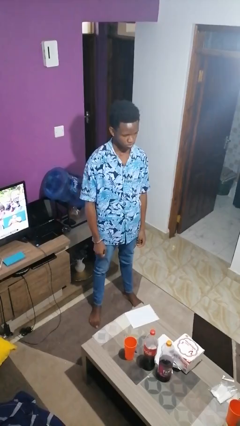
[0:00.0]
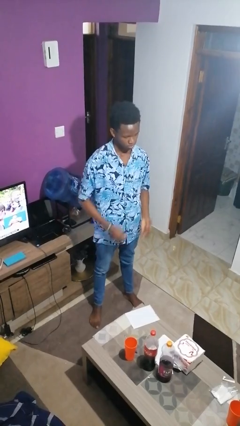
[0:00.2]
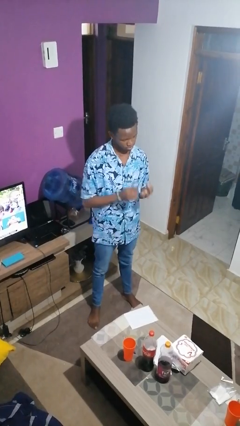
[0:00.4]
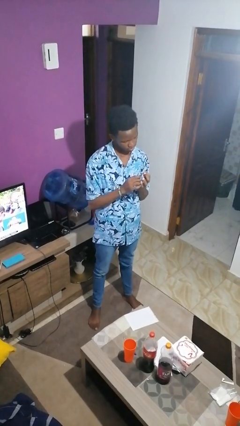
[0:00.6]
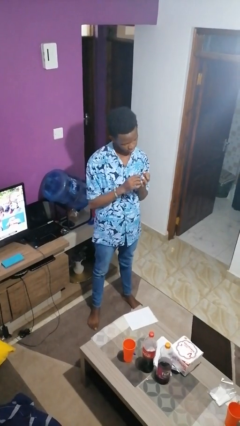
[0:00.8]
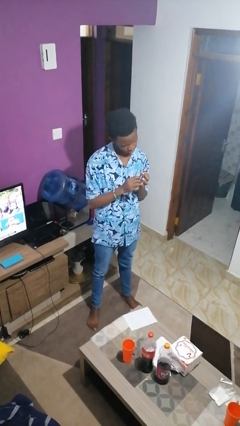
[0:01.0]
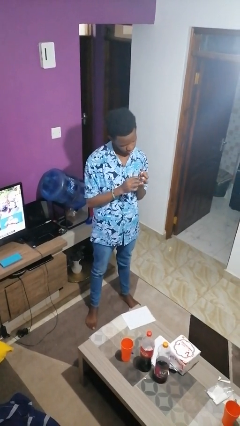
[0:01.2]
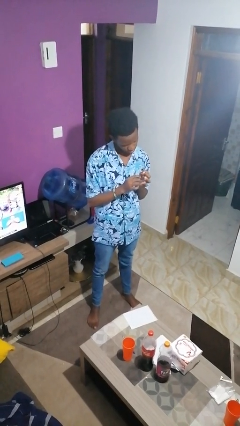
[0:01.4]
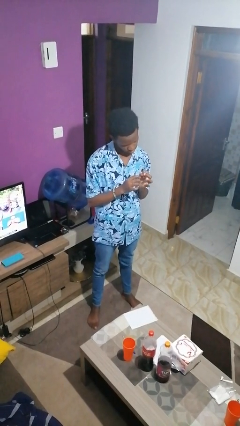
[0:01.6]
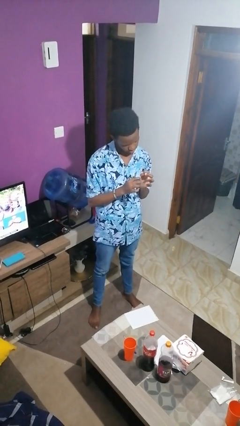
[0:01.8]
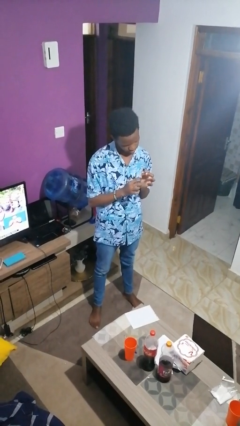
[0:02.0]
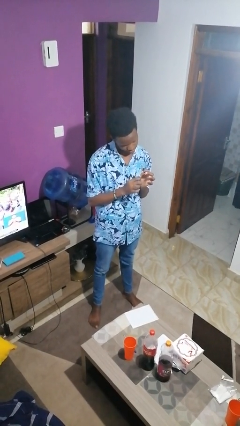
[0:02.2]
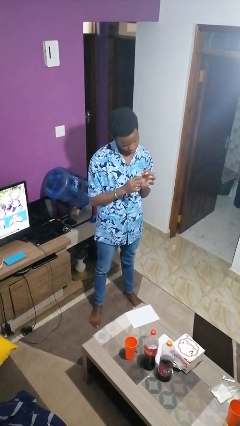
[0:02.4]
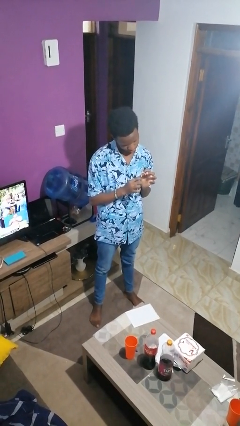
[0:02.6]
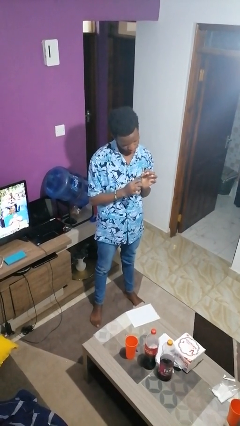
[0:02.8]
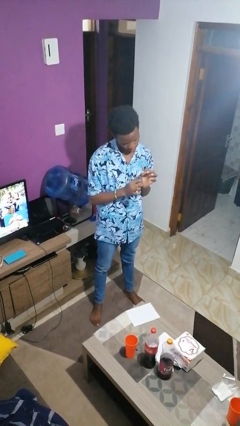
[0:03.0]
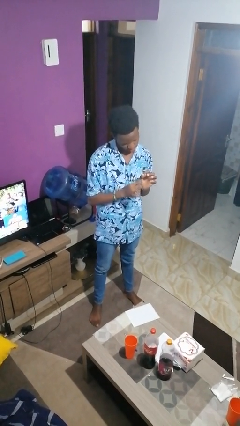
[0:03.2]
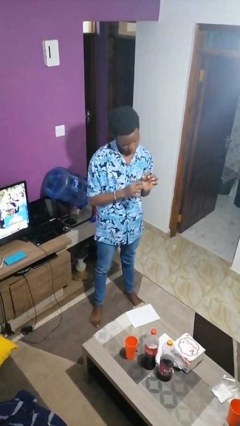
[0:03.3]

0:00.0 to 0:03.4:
person files fingernails

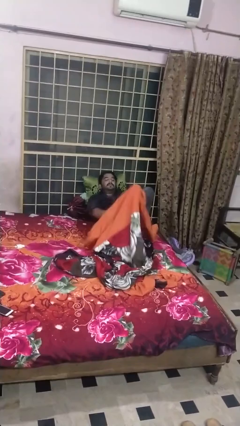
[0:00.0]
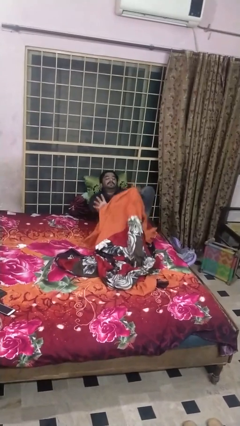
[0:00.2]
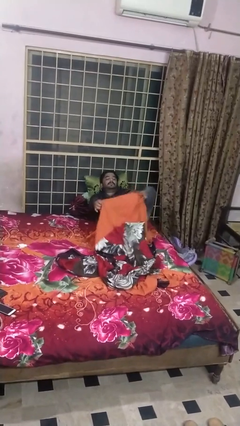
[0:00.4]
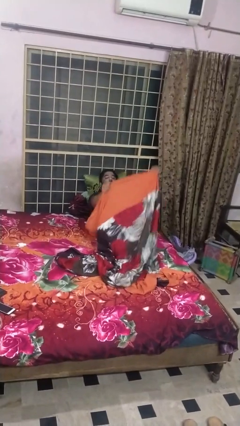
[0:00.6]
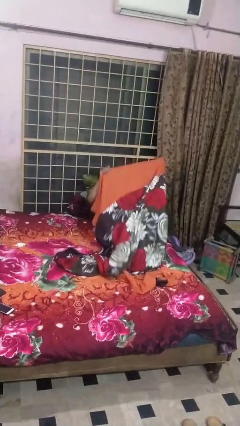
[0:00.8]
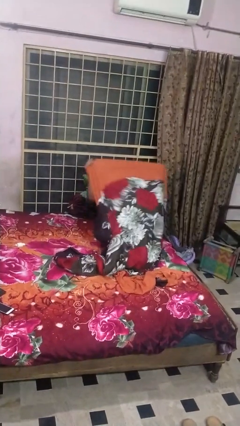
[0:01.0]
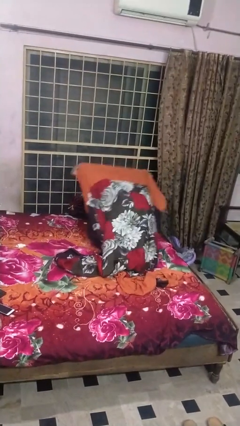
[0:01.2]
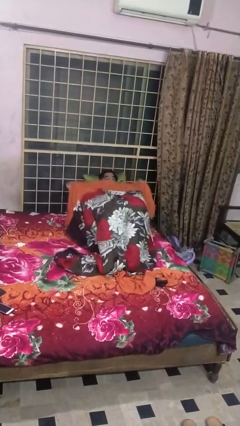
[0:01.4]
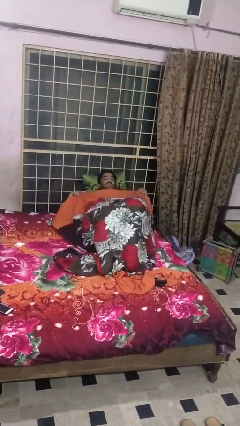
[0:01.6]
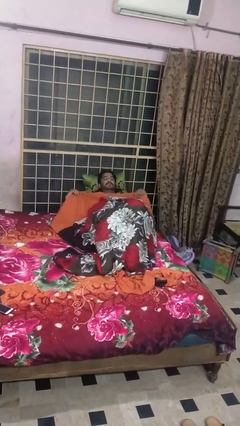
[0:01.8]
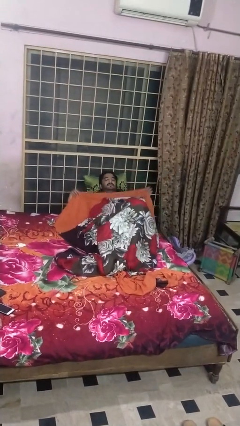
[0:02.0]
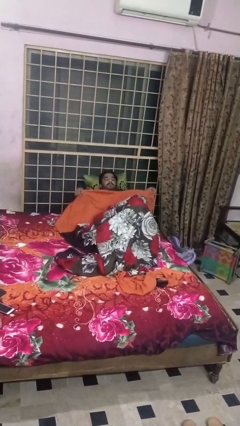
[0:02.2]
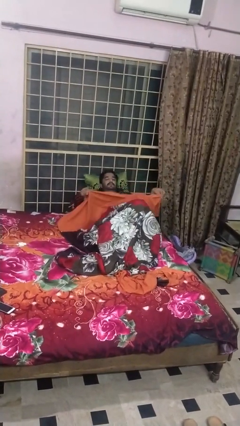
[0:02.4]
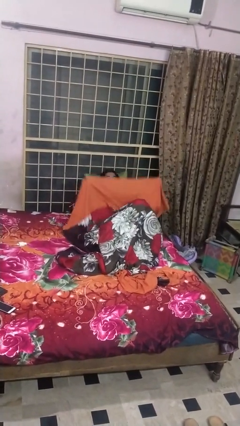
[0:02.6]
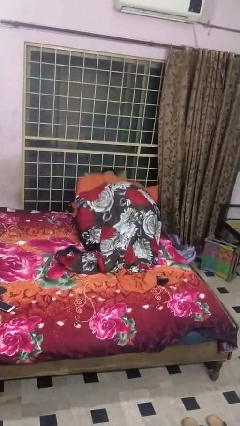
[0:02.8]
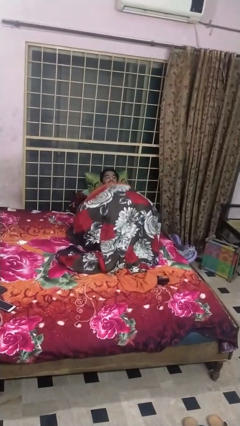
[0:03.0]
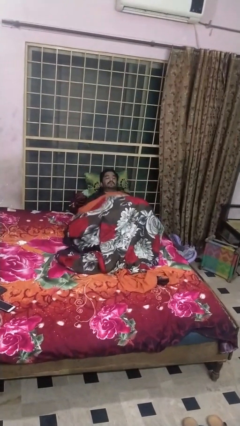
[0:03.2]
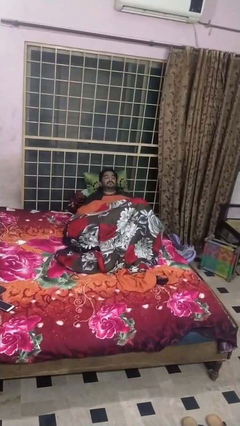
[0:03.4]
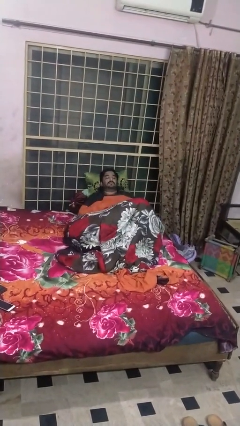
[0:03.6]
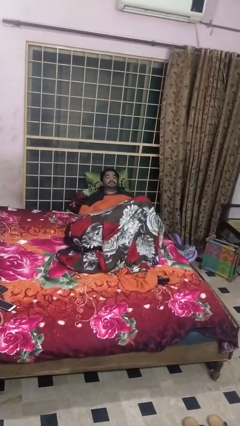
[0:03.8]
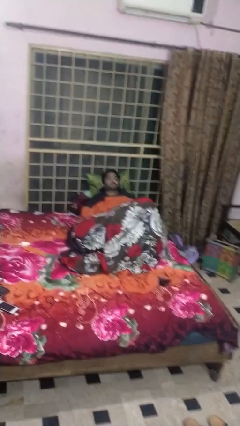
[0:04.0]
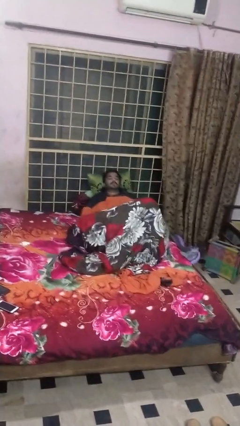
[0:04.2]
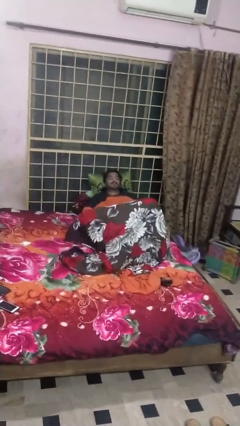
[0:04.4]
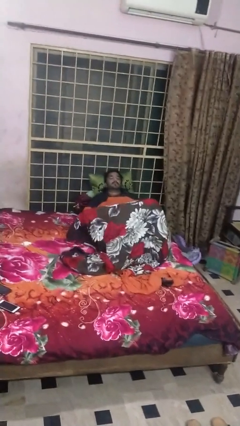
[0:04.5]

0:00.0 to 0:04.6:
person covers with bedsheets

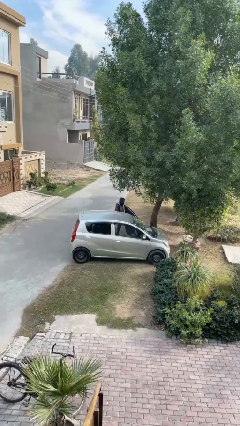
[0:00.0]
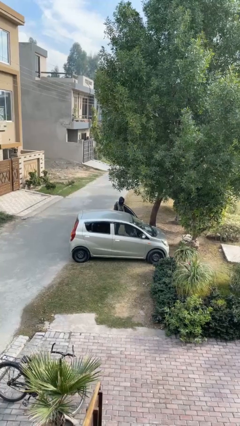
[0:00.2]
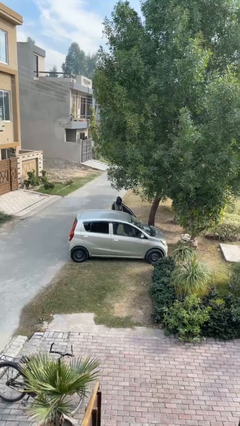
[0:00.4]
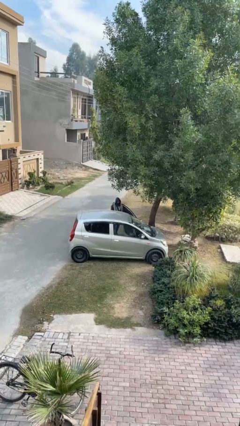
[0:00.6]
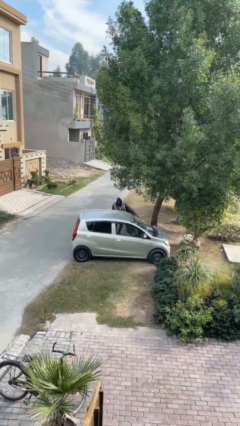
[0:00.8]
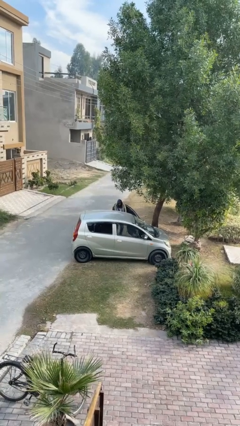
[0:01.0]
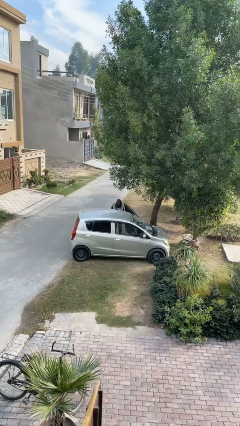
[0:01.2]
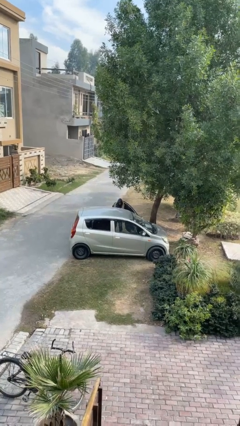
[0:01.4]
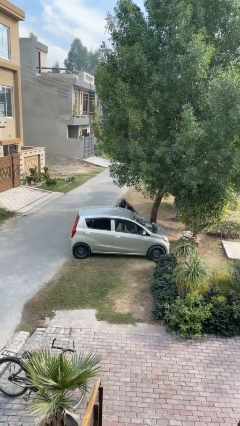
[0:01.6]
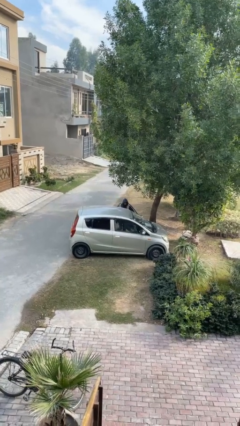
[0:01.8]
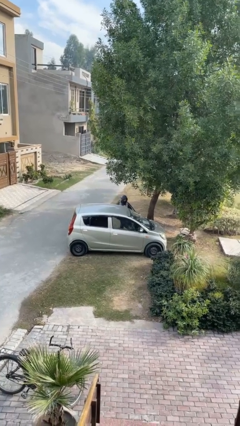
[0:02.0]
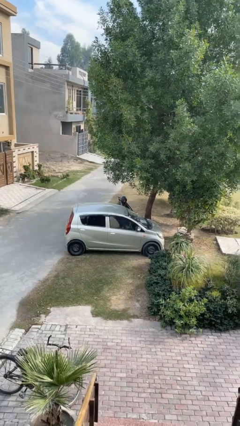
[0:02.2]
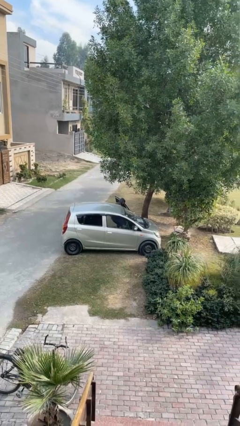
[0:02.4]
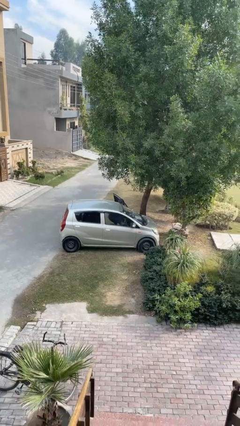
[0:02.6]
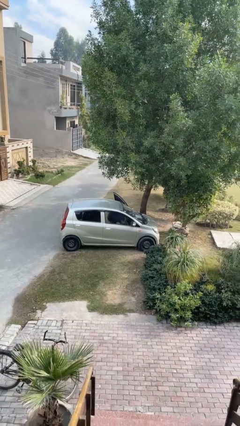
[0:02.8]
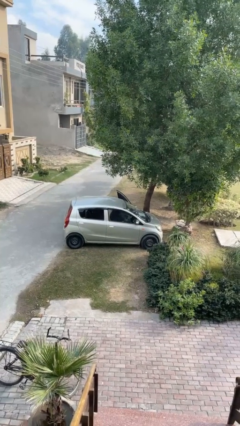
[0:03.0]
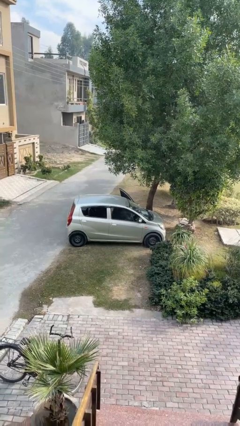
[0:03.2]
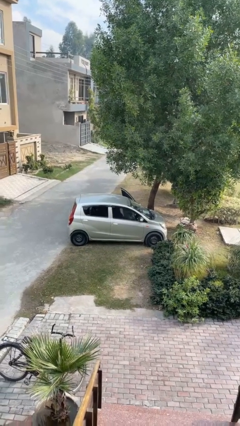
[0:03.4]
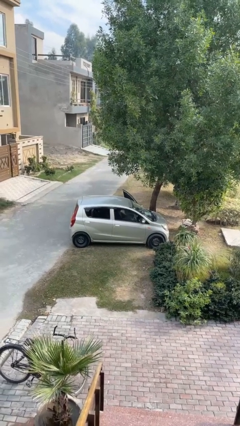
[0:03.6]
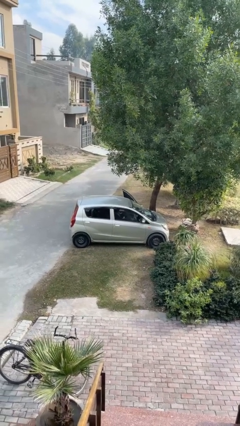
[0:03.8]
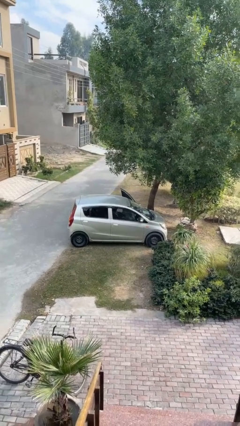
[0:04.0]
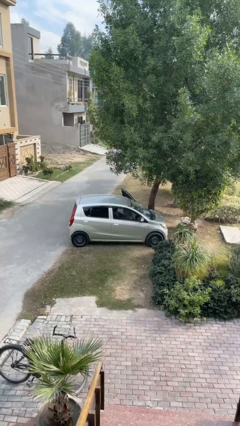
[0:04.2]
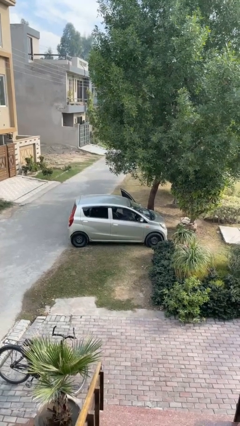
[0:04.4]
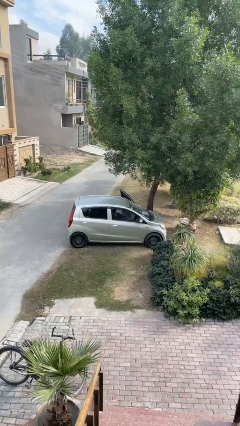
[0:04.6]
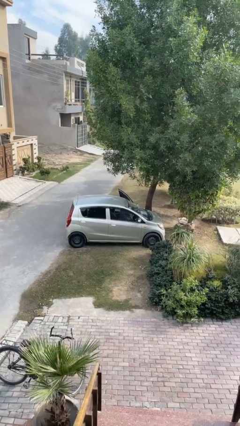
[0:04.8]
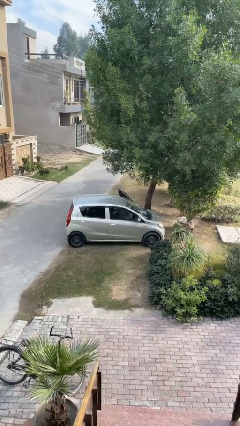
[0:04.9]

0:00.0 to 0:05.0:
person enters car

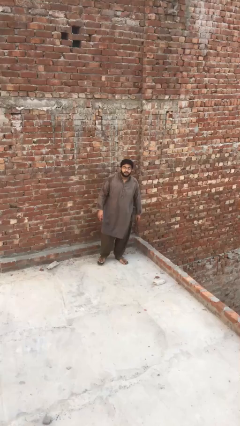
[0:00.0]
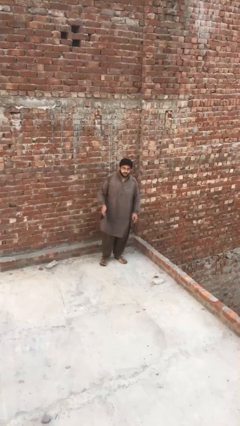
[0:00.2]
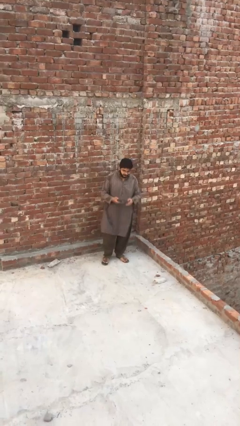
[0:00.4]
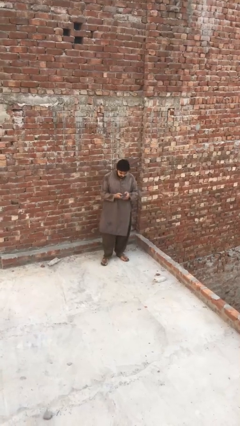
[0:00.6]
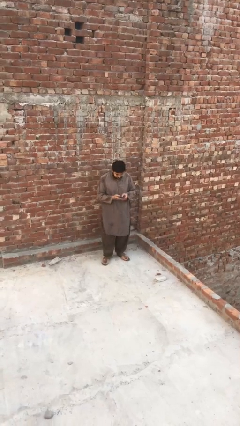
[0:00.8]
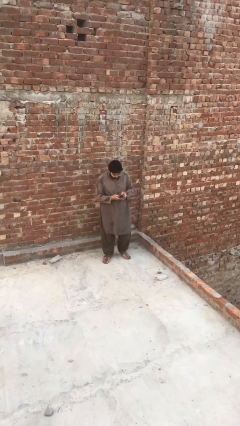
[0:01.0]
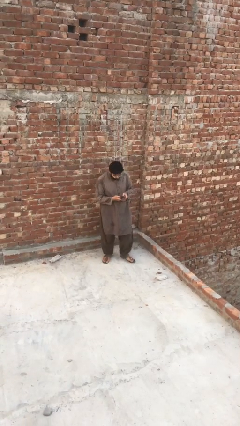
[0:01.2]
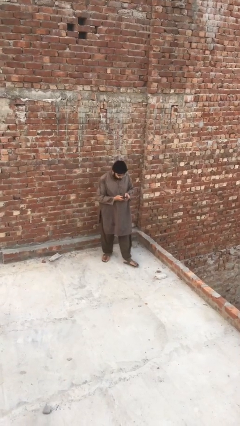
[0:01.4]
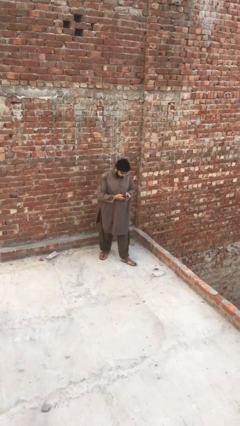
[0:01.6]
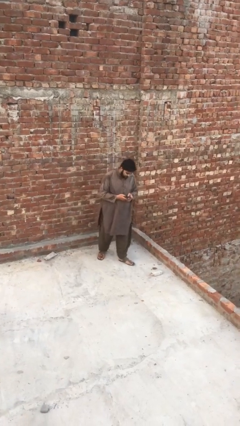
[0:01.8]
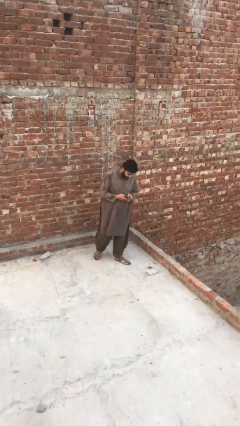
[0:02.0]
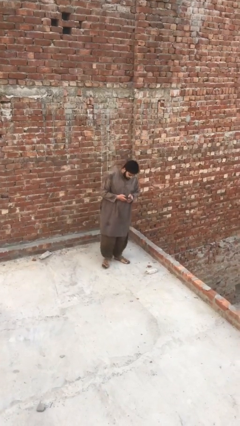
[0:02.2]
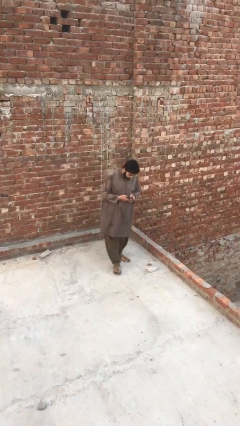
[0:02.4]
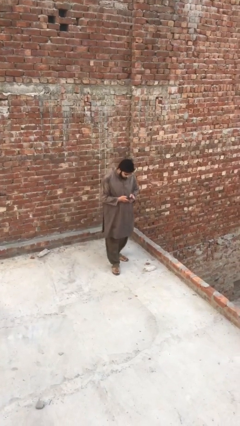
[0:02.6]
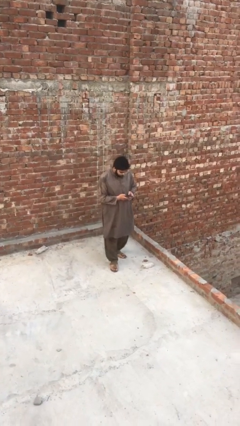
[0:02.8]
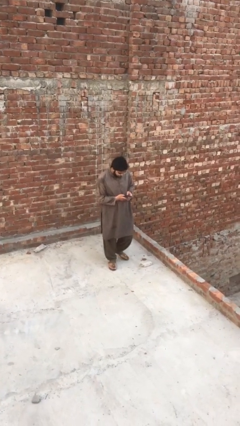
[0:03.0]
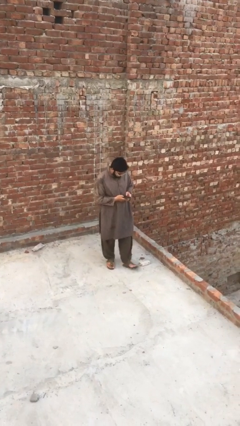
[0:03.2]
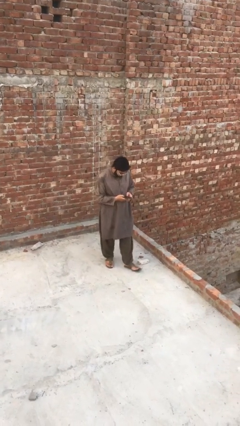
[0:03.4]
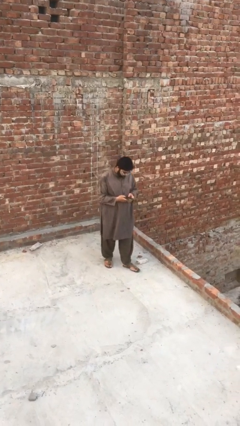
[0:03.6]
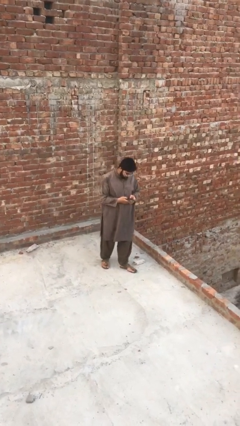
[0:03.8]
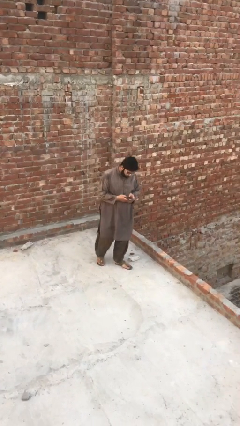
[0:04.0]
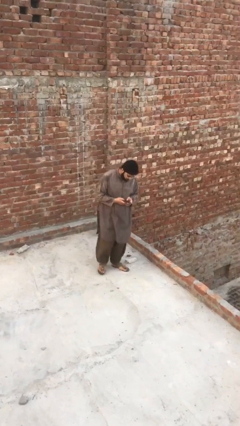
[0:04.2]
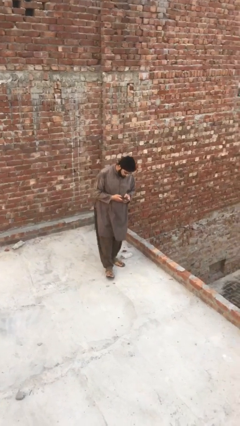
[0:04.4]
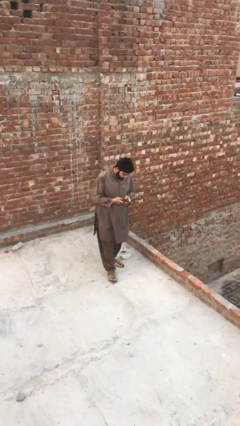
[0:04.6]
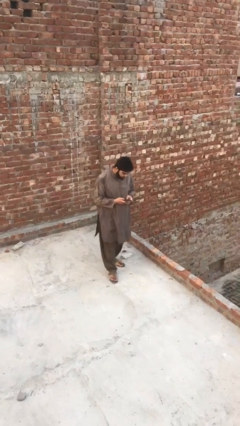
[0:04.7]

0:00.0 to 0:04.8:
person texts on phone

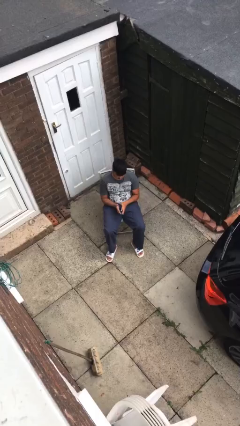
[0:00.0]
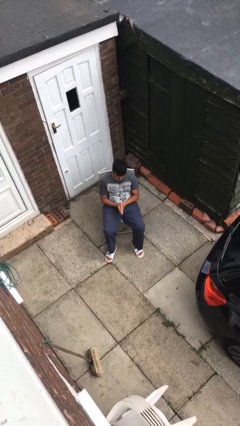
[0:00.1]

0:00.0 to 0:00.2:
person looks at hands in lap
